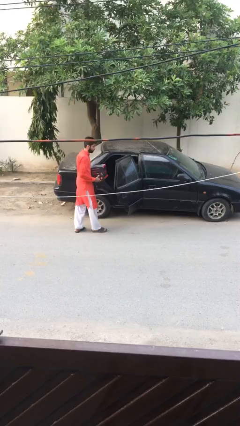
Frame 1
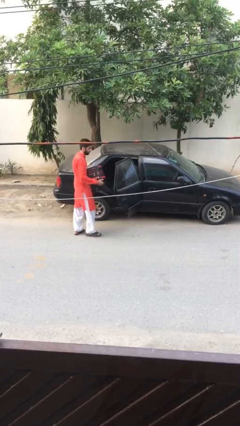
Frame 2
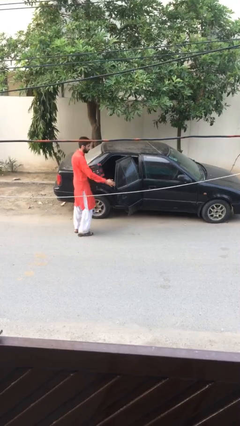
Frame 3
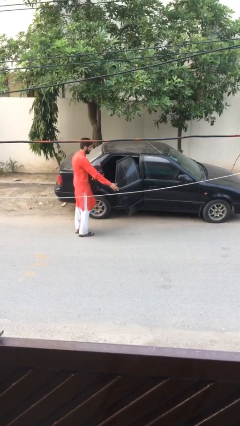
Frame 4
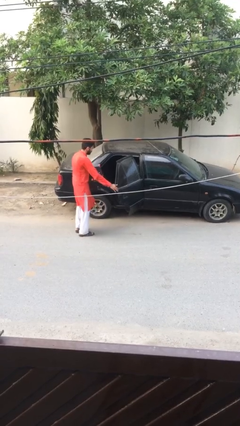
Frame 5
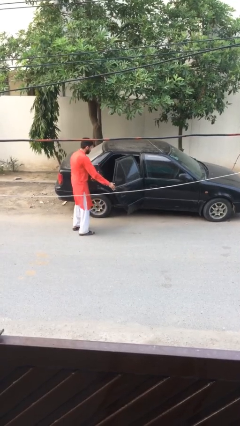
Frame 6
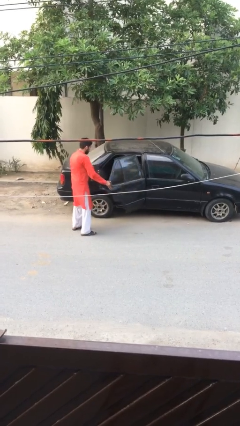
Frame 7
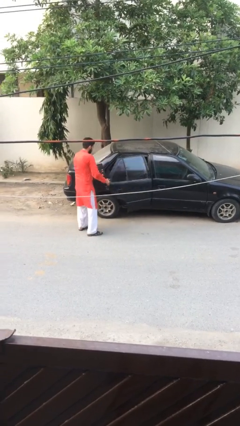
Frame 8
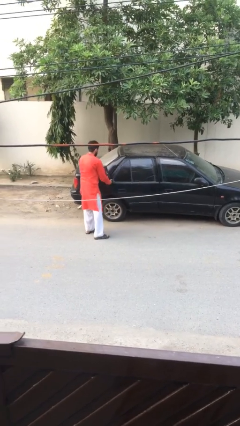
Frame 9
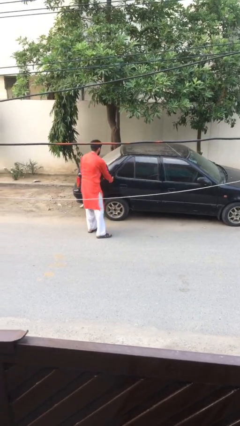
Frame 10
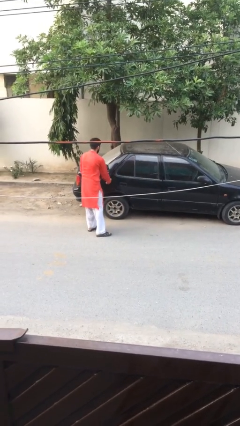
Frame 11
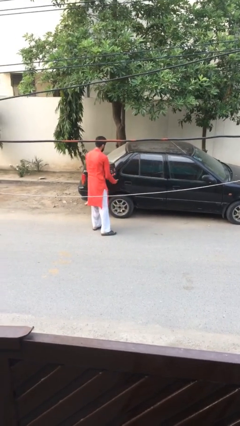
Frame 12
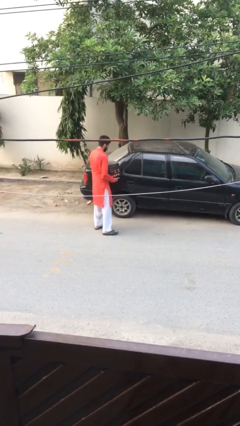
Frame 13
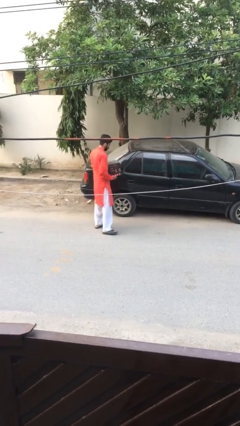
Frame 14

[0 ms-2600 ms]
person closes car door

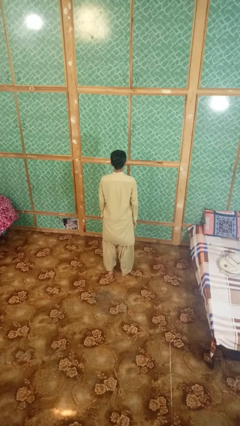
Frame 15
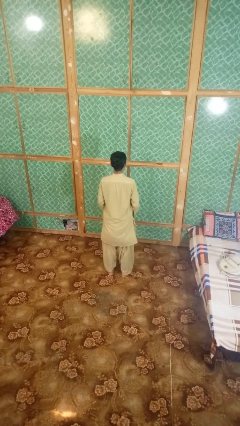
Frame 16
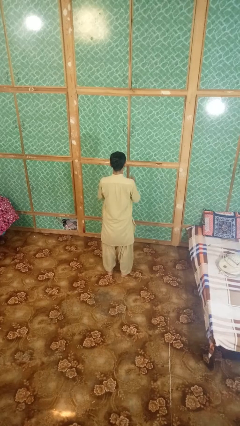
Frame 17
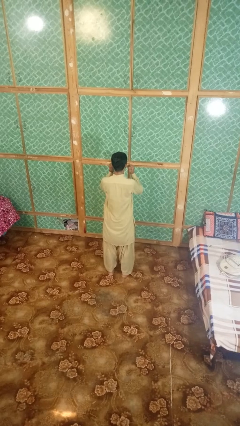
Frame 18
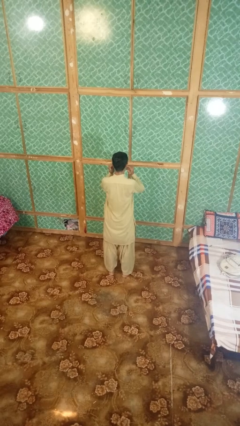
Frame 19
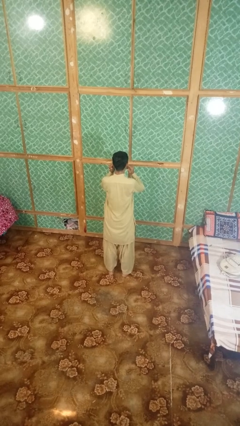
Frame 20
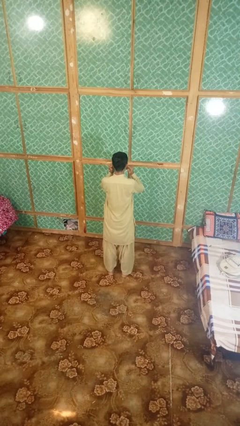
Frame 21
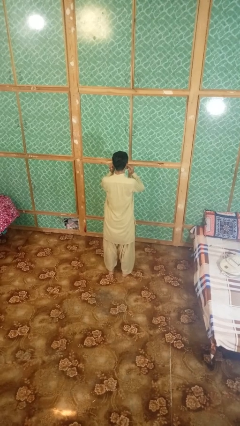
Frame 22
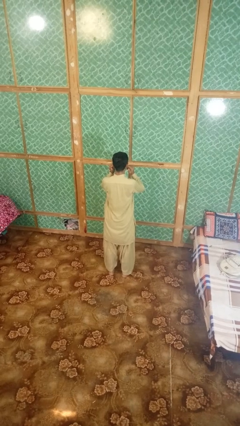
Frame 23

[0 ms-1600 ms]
person puts fingers in ear

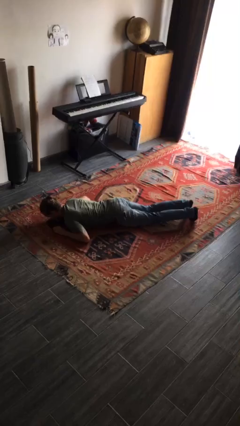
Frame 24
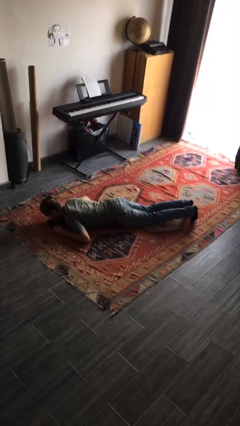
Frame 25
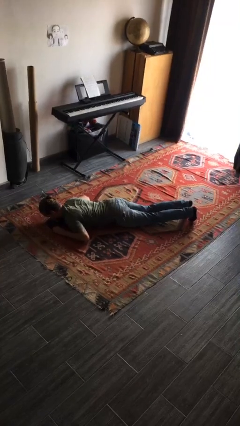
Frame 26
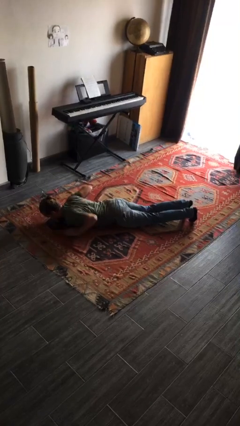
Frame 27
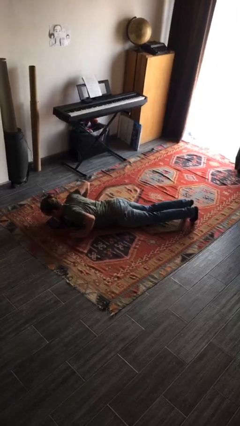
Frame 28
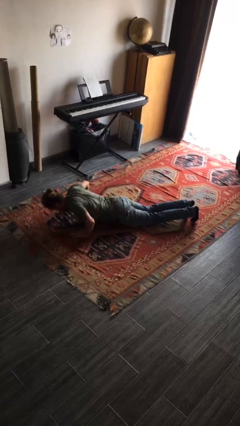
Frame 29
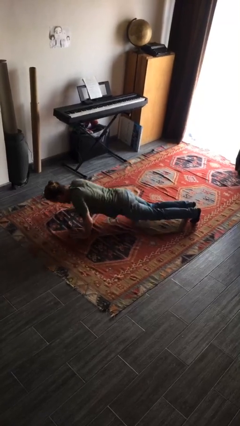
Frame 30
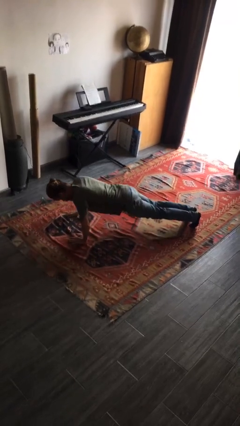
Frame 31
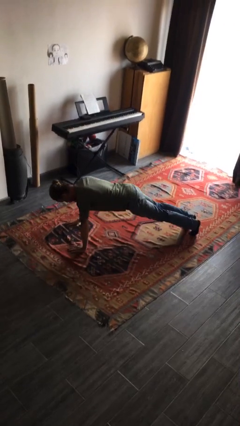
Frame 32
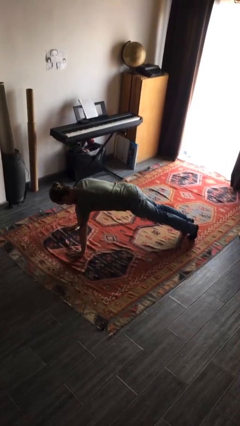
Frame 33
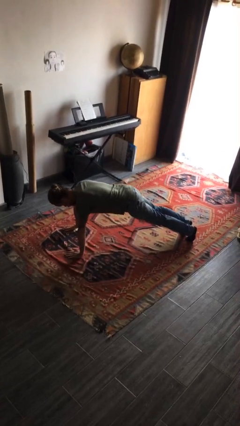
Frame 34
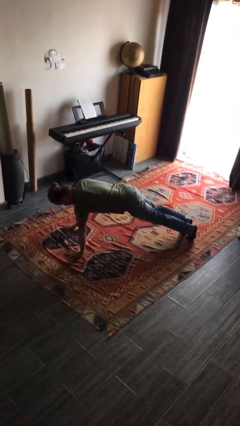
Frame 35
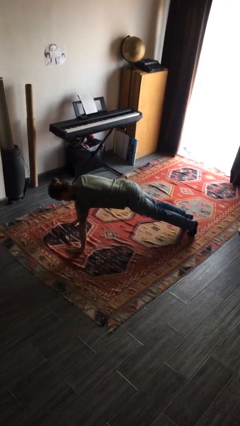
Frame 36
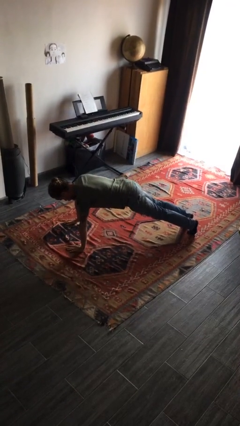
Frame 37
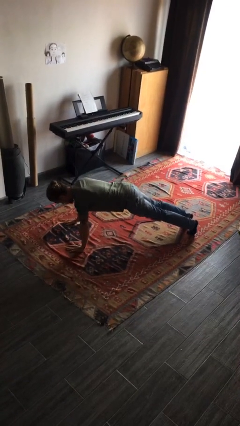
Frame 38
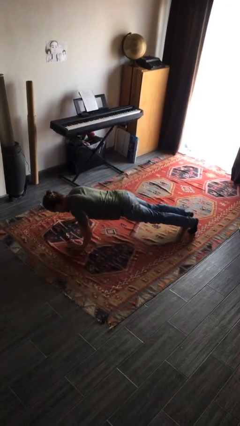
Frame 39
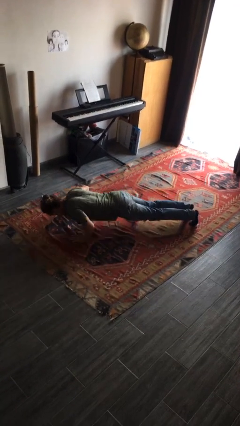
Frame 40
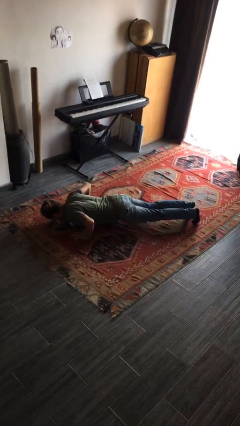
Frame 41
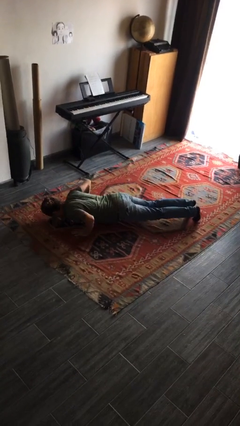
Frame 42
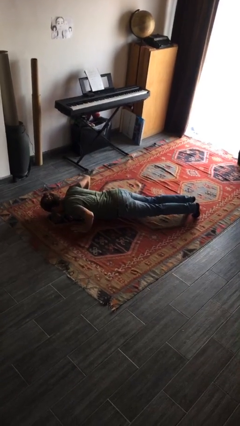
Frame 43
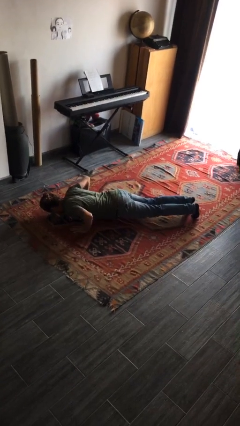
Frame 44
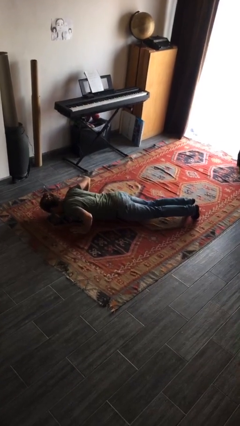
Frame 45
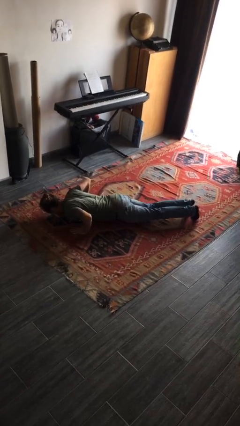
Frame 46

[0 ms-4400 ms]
person exercises with pushup

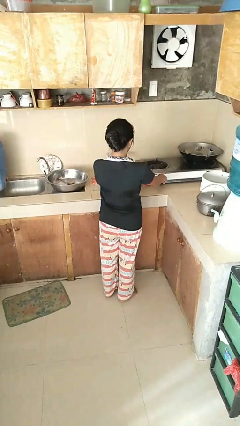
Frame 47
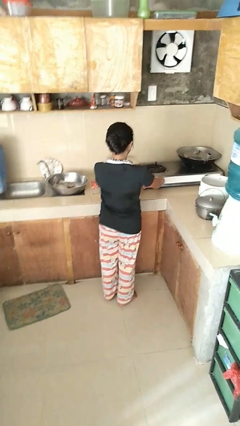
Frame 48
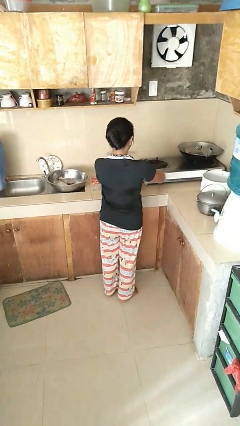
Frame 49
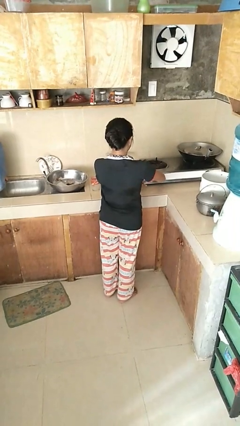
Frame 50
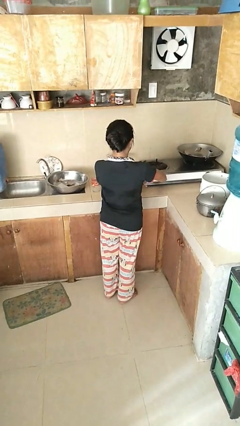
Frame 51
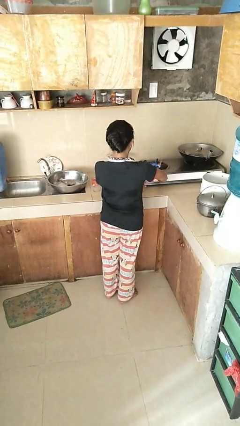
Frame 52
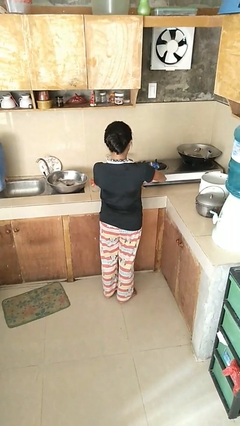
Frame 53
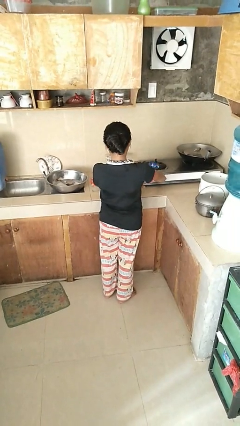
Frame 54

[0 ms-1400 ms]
person turns on stovetop

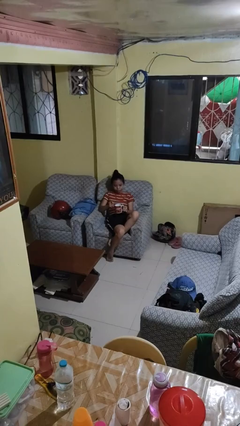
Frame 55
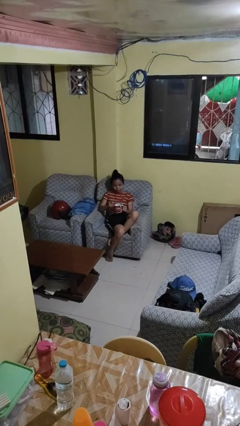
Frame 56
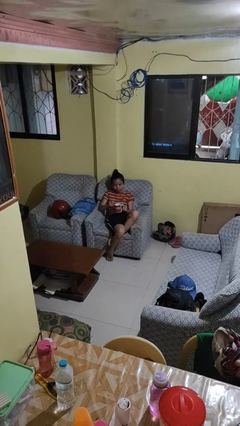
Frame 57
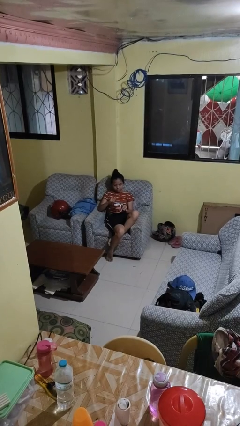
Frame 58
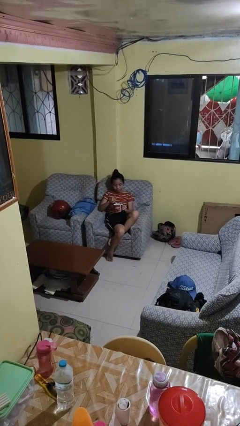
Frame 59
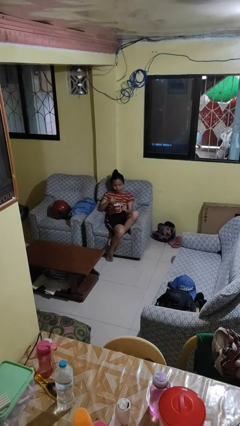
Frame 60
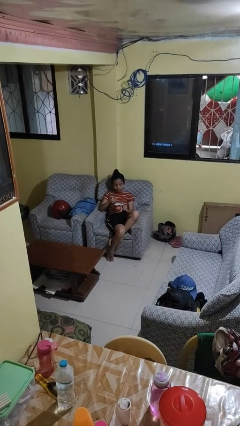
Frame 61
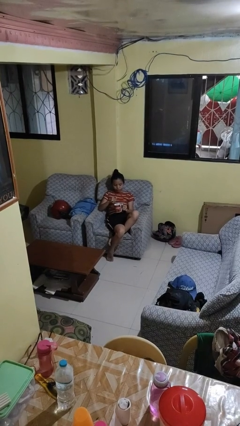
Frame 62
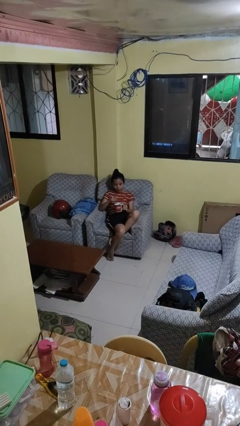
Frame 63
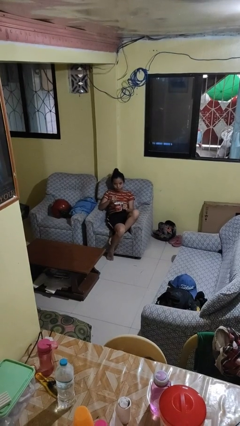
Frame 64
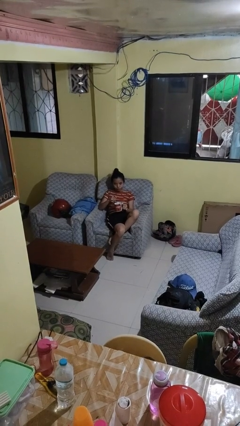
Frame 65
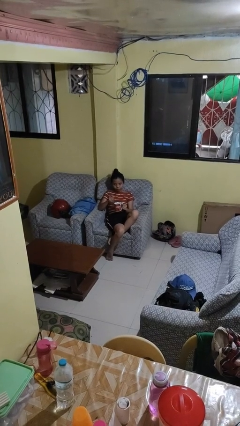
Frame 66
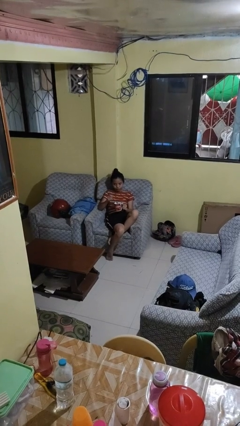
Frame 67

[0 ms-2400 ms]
person stirs mug

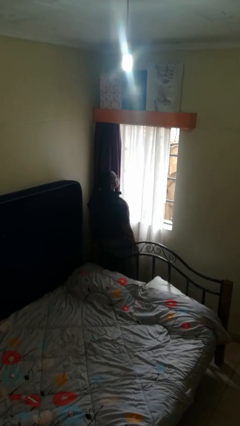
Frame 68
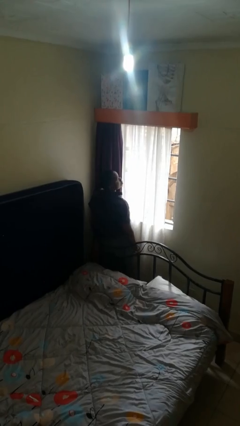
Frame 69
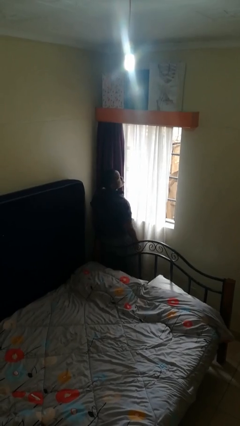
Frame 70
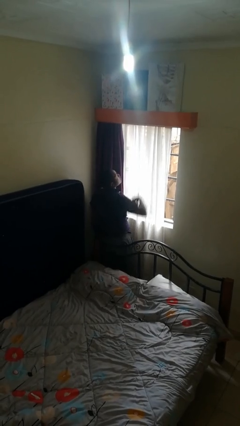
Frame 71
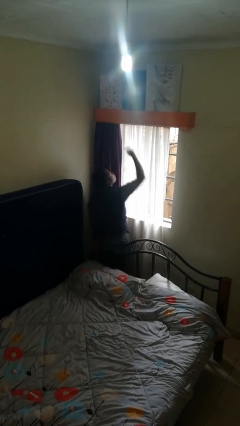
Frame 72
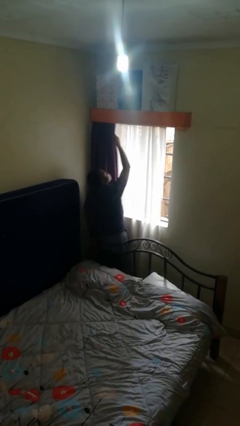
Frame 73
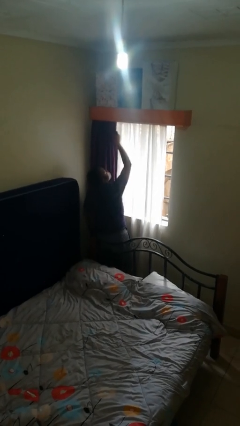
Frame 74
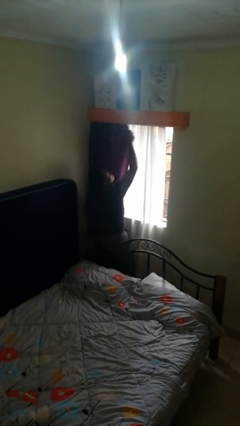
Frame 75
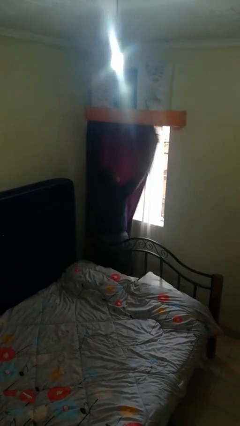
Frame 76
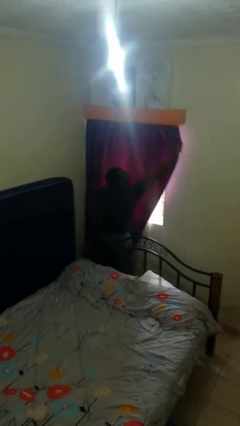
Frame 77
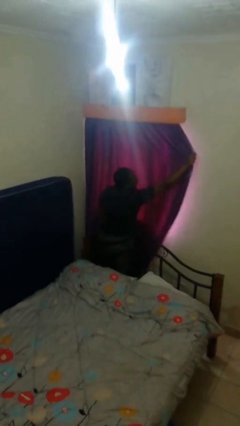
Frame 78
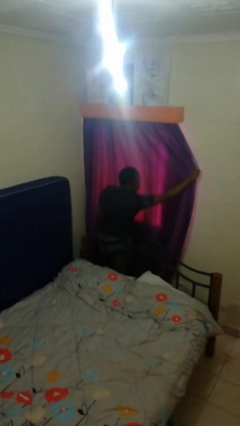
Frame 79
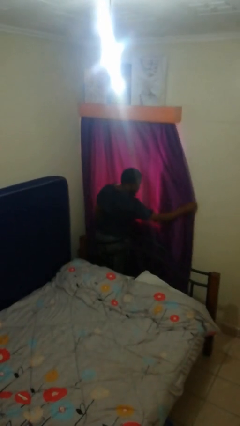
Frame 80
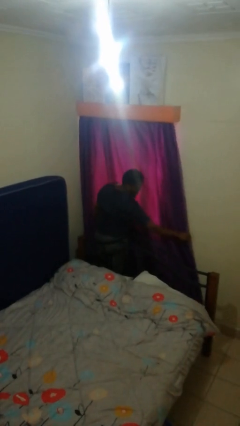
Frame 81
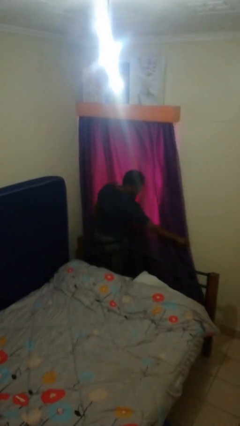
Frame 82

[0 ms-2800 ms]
person closes curtains

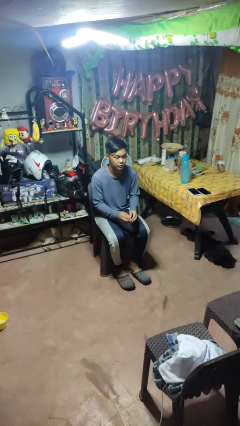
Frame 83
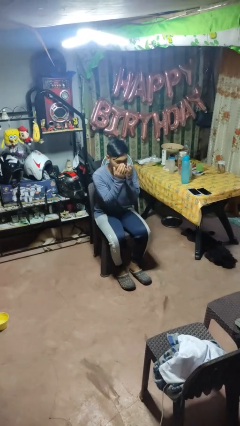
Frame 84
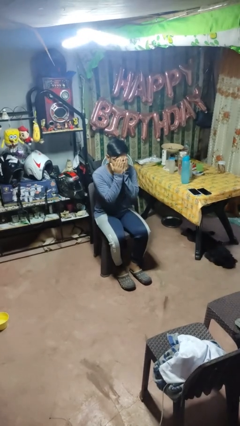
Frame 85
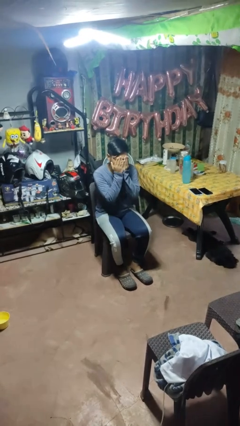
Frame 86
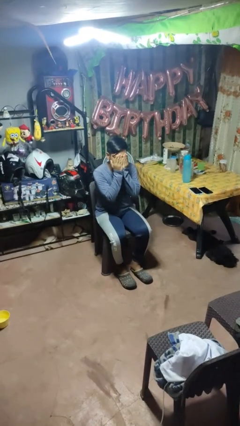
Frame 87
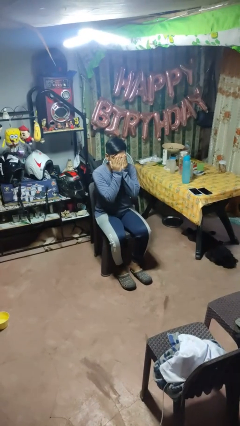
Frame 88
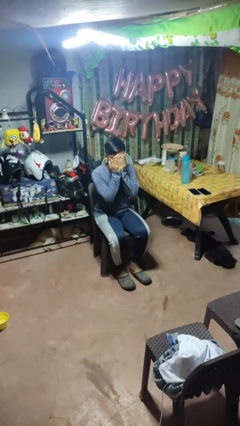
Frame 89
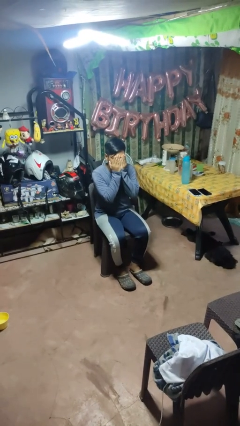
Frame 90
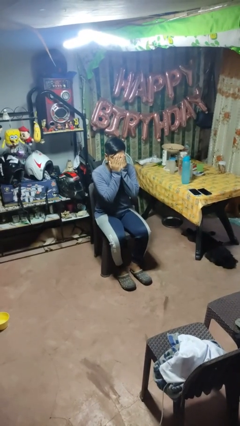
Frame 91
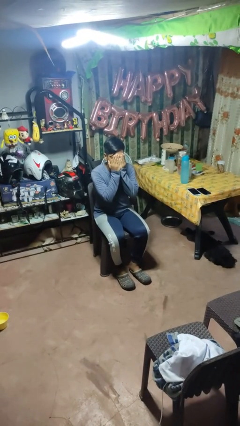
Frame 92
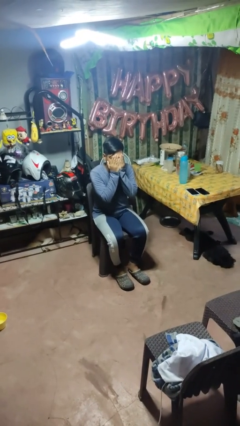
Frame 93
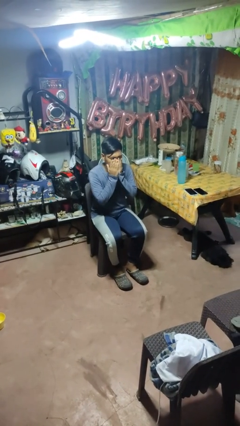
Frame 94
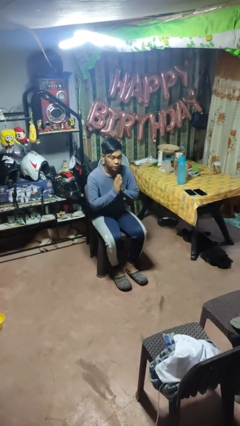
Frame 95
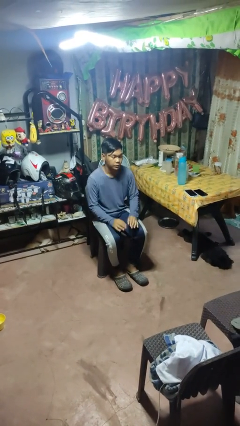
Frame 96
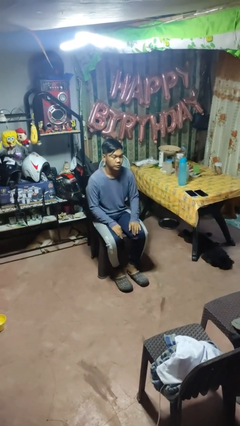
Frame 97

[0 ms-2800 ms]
person covers face with hands
